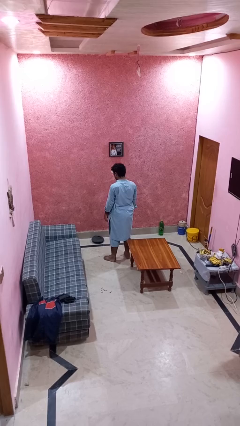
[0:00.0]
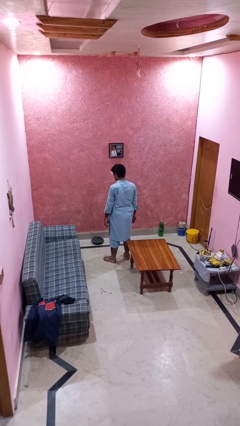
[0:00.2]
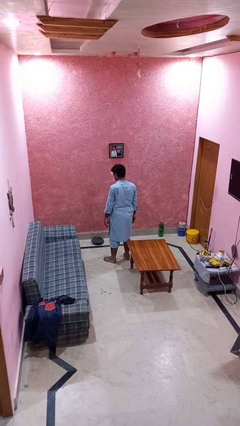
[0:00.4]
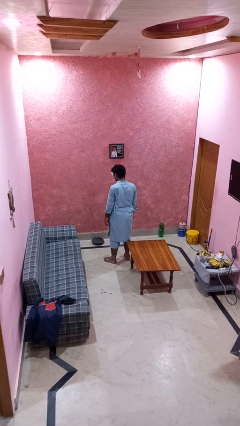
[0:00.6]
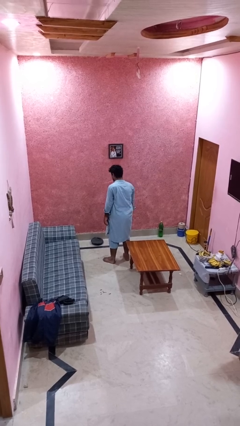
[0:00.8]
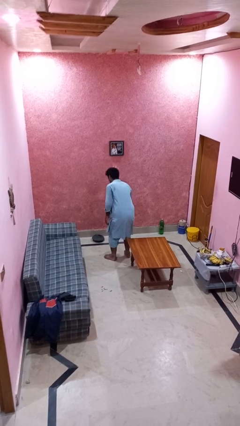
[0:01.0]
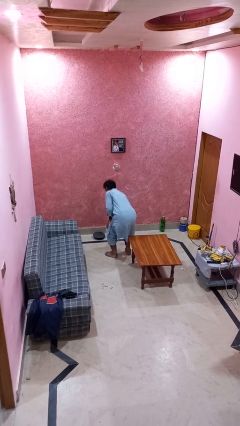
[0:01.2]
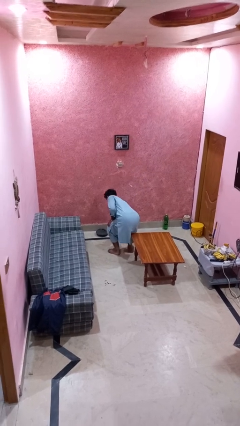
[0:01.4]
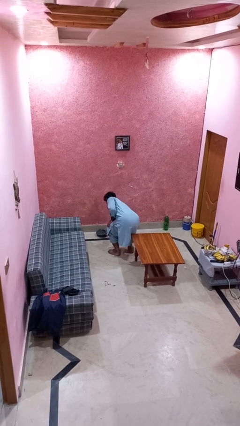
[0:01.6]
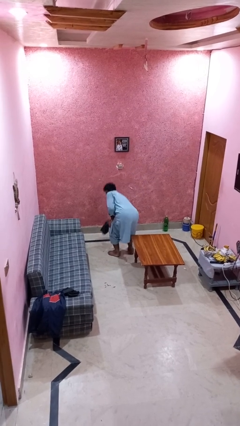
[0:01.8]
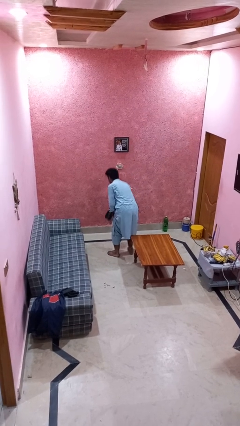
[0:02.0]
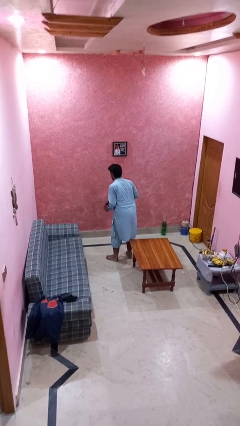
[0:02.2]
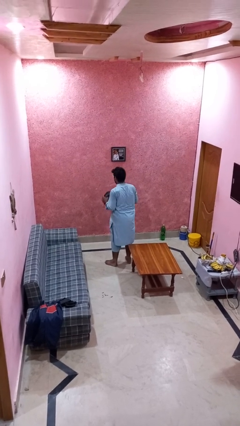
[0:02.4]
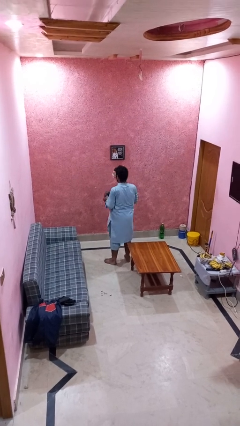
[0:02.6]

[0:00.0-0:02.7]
person picks up object from floor

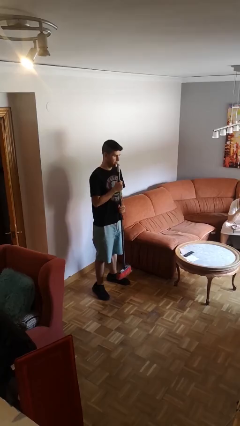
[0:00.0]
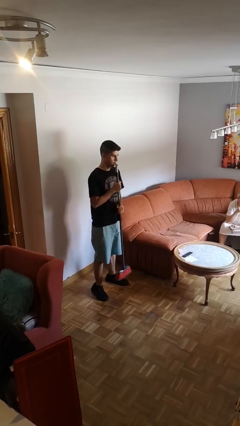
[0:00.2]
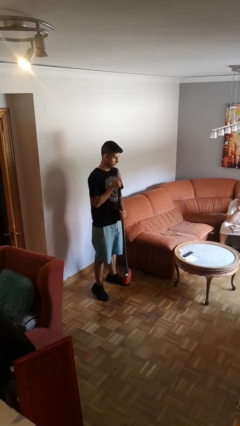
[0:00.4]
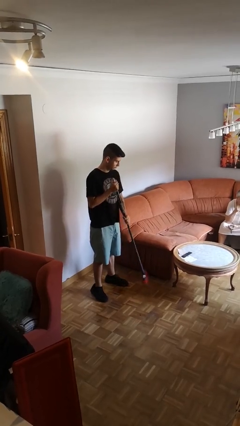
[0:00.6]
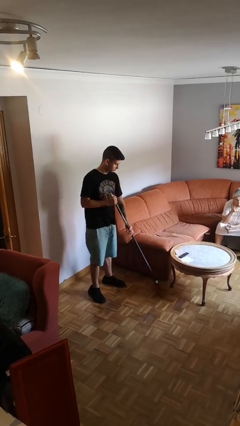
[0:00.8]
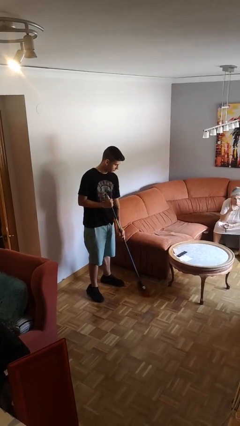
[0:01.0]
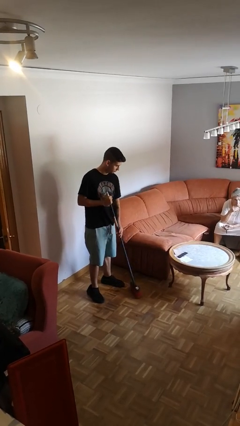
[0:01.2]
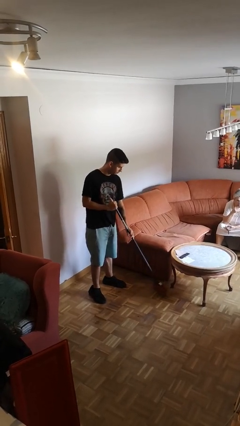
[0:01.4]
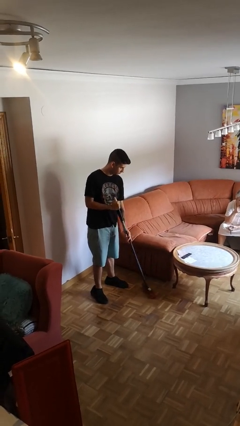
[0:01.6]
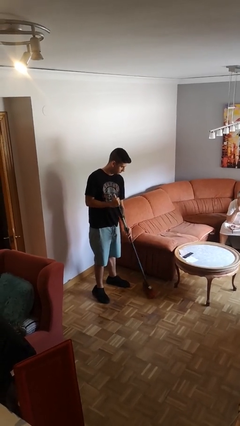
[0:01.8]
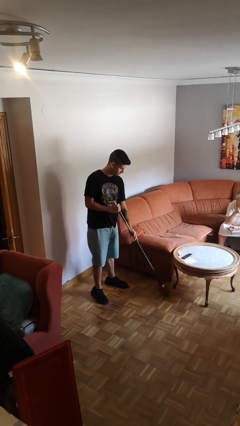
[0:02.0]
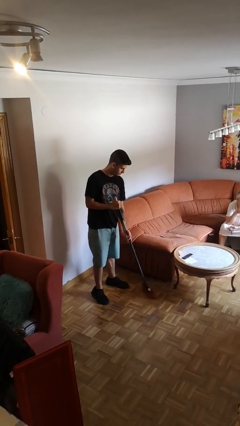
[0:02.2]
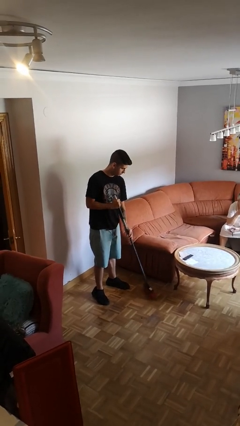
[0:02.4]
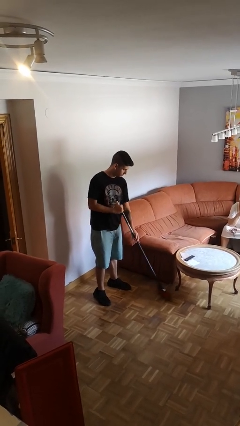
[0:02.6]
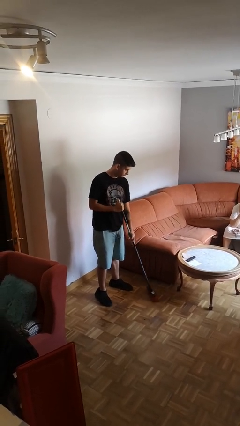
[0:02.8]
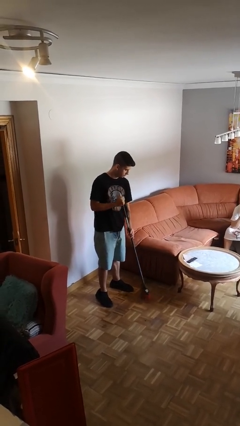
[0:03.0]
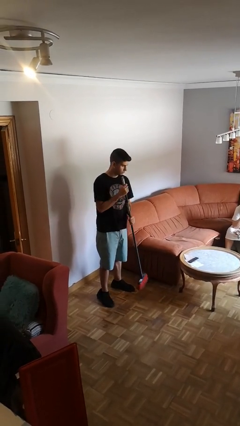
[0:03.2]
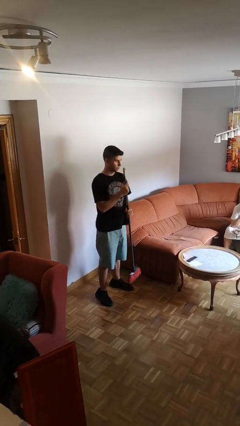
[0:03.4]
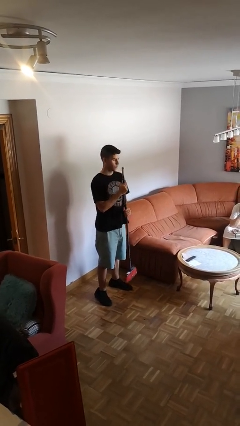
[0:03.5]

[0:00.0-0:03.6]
person sweeps floor

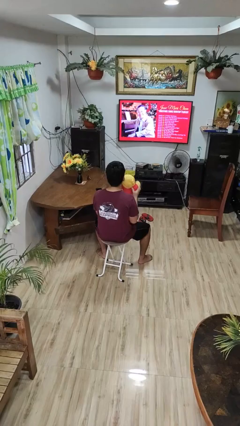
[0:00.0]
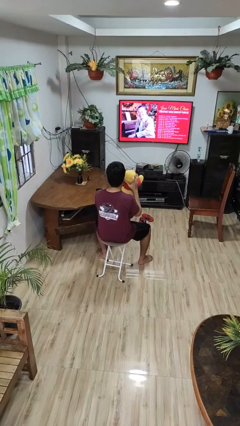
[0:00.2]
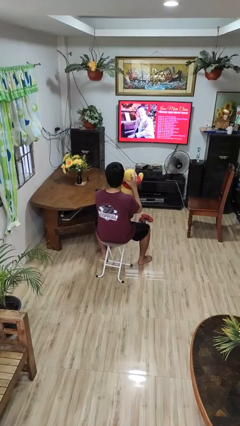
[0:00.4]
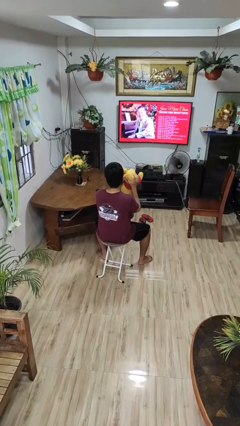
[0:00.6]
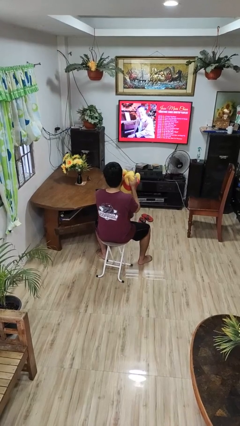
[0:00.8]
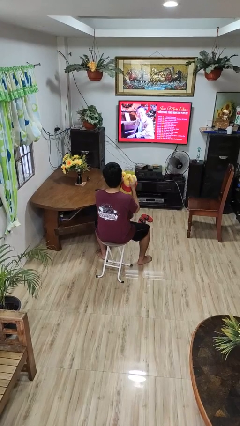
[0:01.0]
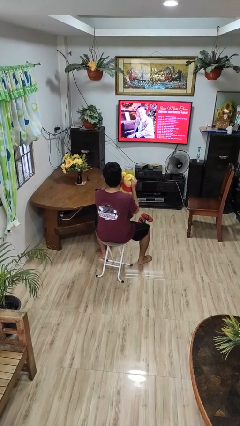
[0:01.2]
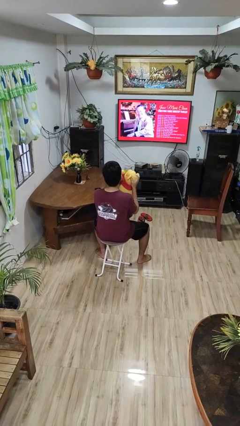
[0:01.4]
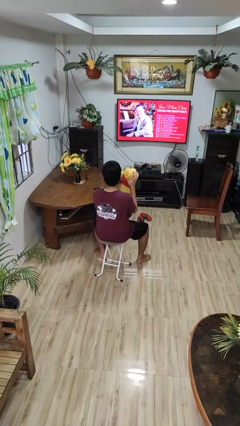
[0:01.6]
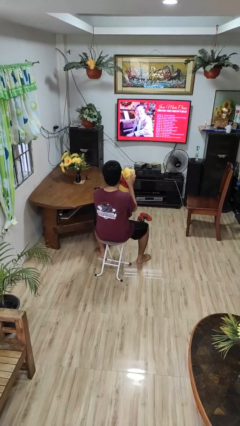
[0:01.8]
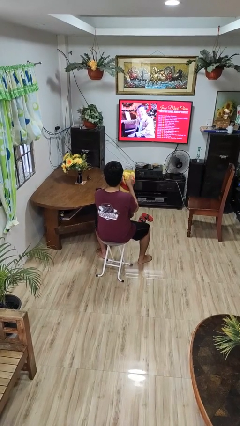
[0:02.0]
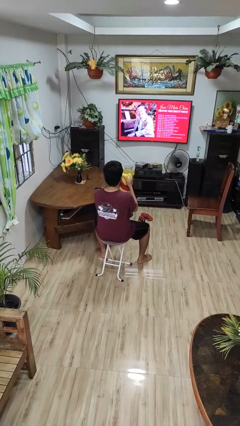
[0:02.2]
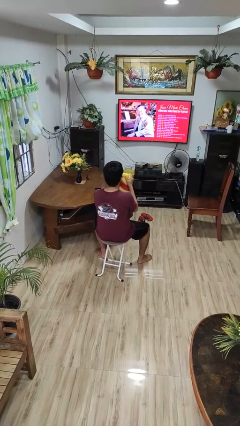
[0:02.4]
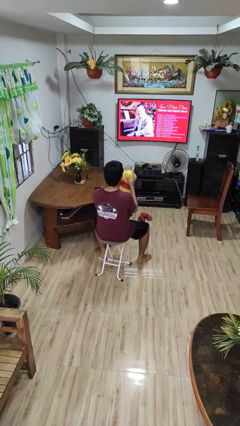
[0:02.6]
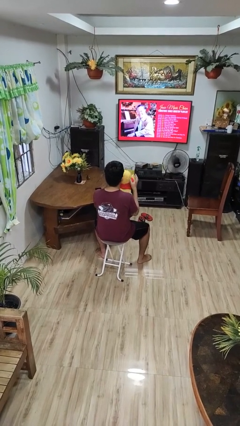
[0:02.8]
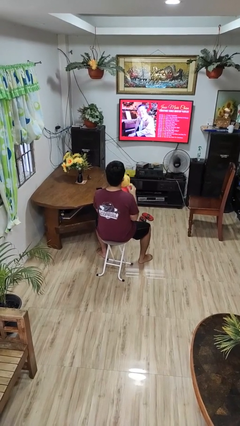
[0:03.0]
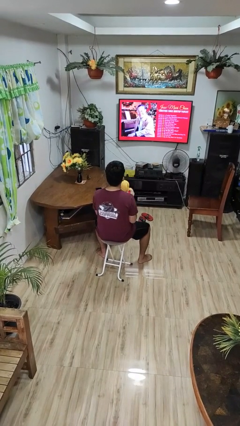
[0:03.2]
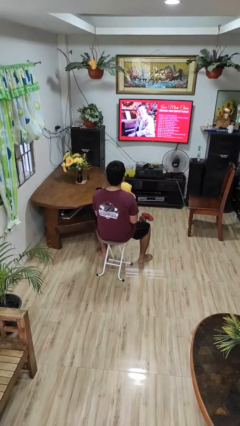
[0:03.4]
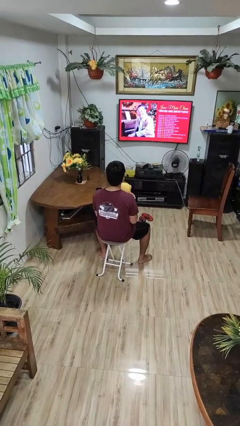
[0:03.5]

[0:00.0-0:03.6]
person squeezes object

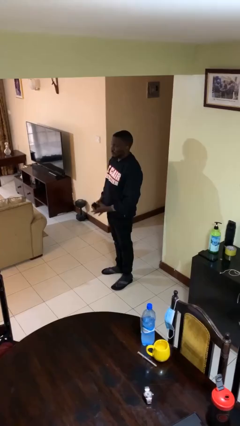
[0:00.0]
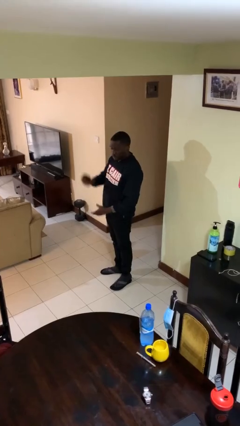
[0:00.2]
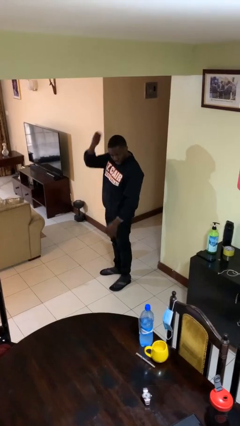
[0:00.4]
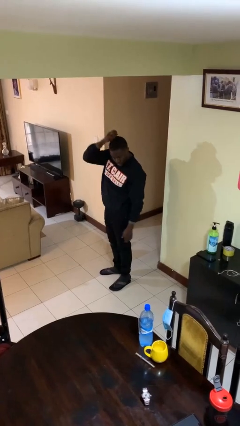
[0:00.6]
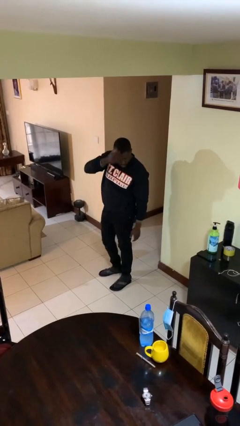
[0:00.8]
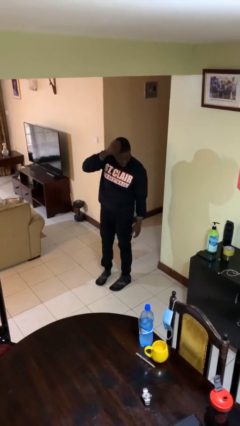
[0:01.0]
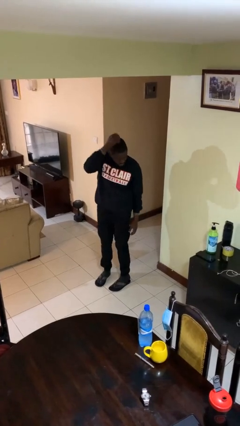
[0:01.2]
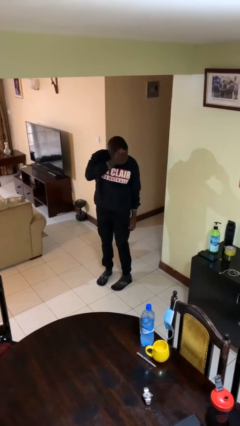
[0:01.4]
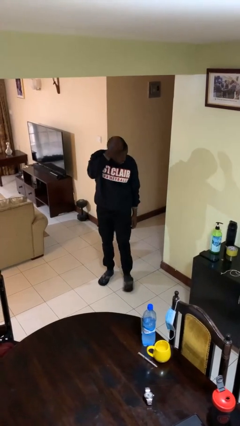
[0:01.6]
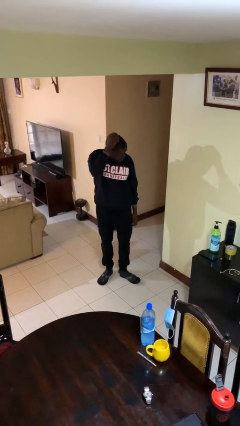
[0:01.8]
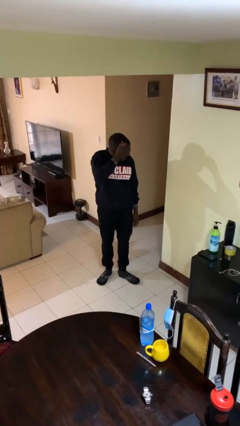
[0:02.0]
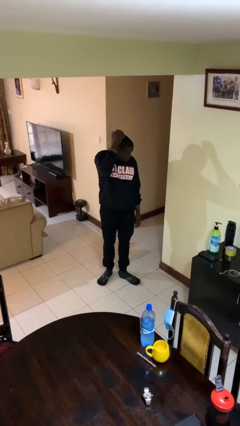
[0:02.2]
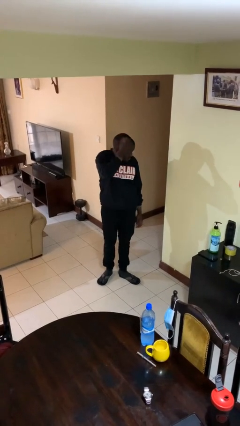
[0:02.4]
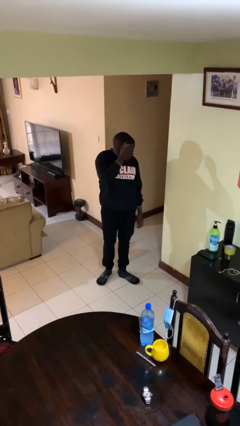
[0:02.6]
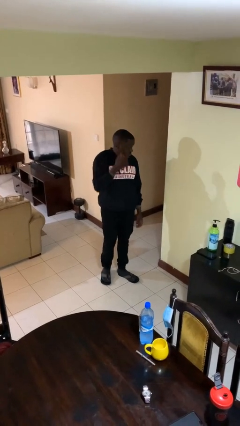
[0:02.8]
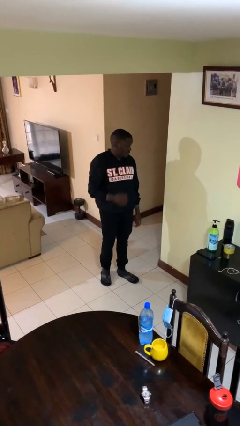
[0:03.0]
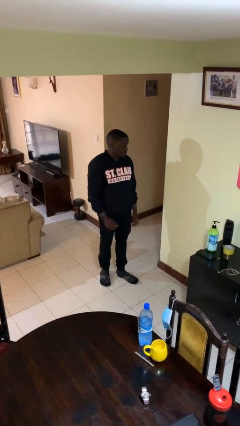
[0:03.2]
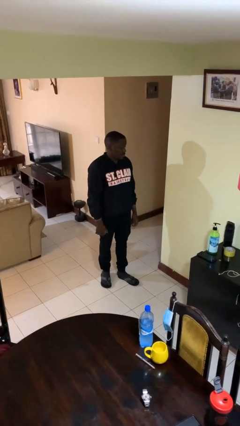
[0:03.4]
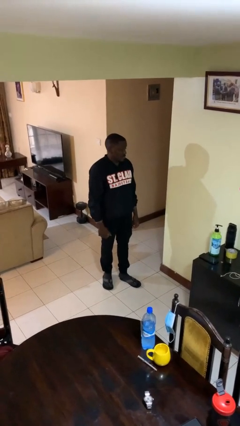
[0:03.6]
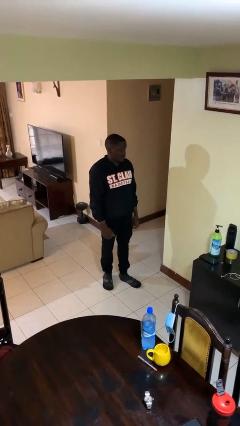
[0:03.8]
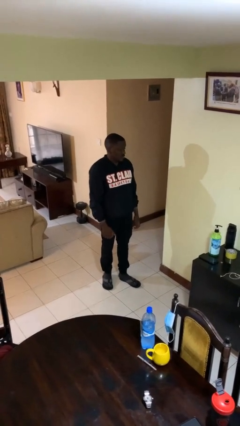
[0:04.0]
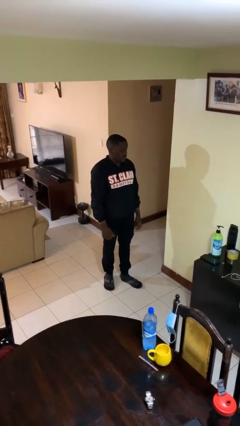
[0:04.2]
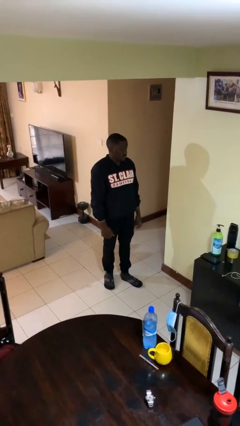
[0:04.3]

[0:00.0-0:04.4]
person brushes hair

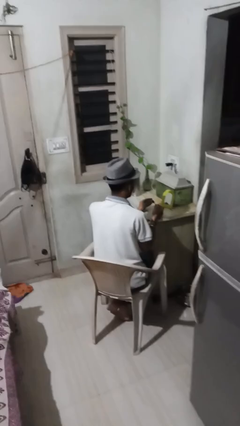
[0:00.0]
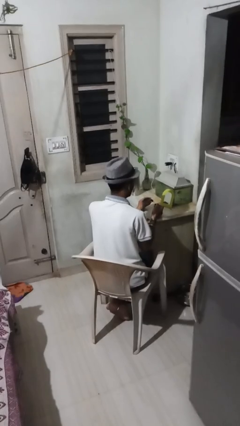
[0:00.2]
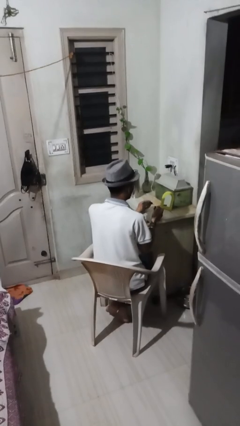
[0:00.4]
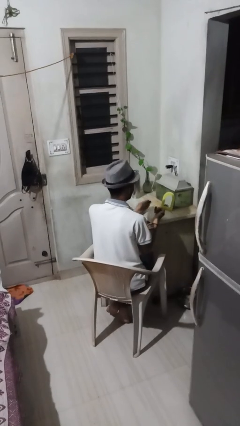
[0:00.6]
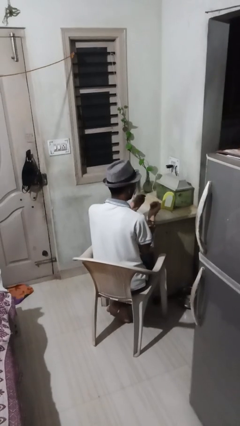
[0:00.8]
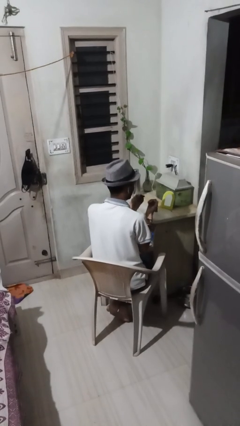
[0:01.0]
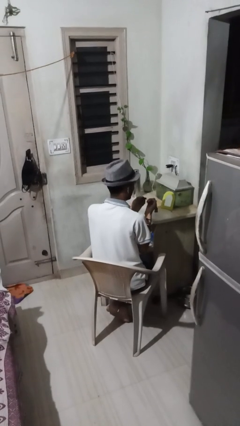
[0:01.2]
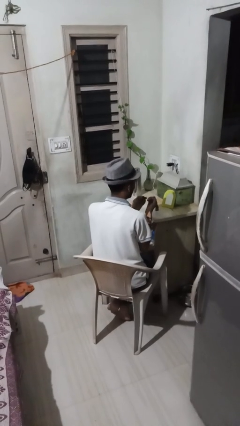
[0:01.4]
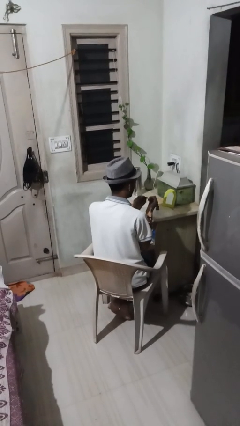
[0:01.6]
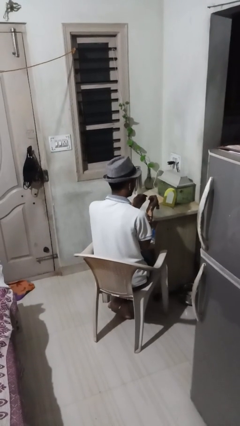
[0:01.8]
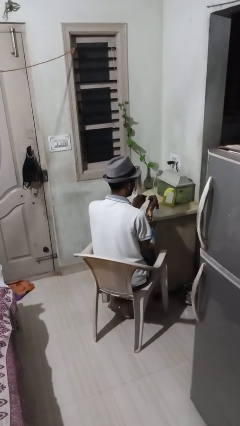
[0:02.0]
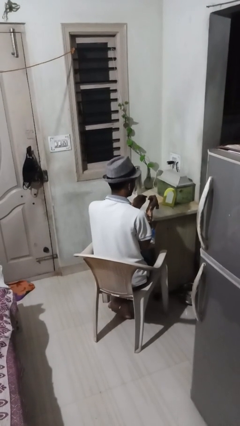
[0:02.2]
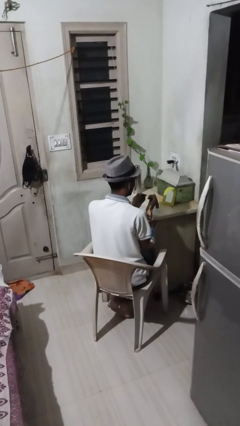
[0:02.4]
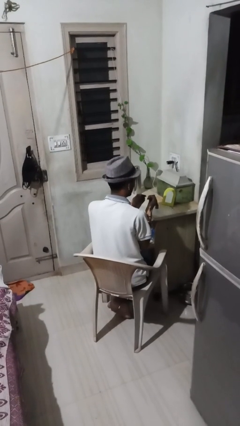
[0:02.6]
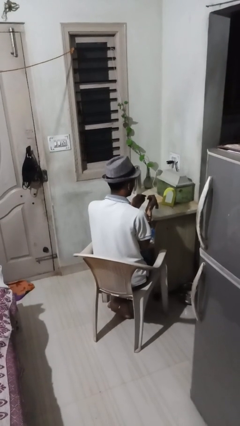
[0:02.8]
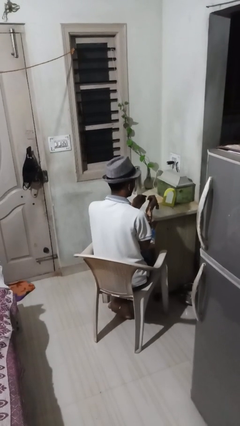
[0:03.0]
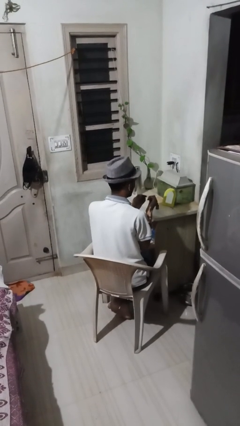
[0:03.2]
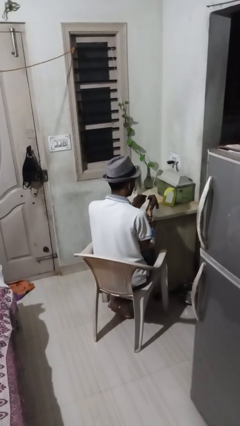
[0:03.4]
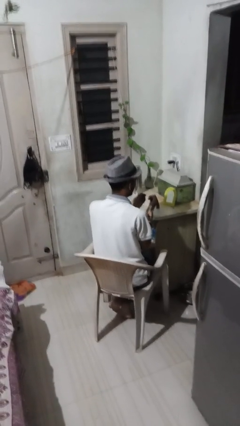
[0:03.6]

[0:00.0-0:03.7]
person paints fingernails
